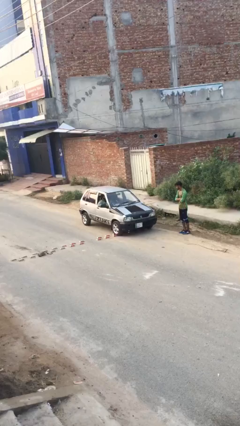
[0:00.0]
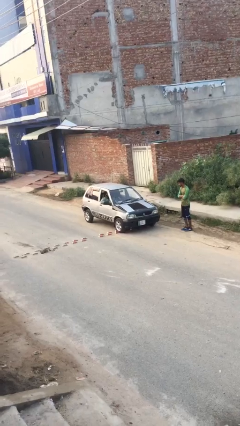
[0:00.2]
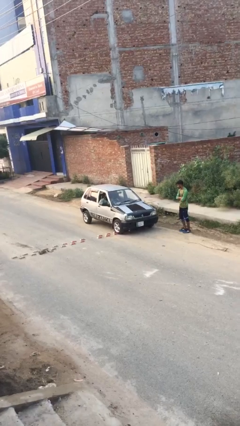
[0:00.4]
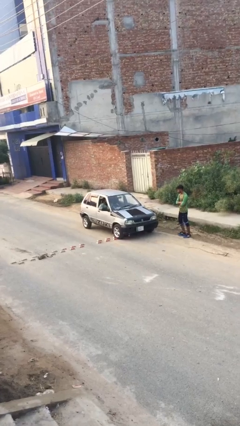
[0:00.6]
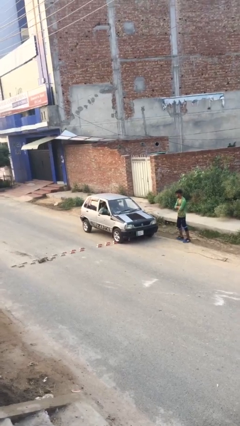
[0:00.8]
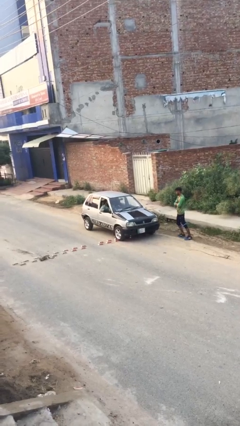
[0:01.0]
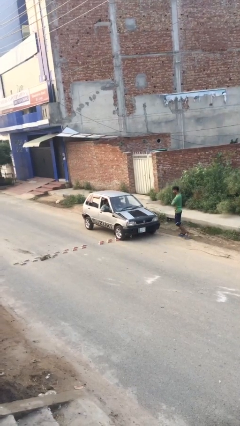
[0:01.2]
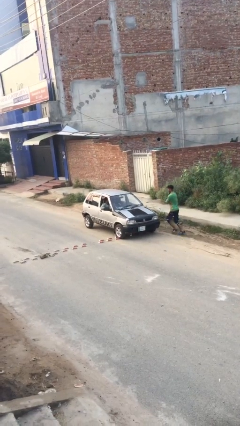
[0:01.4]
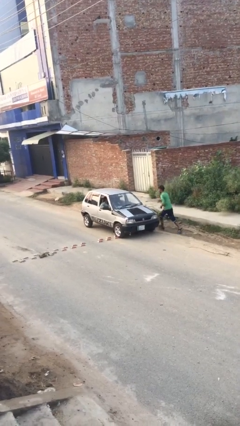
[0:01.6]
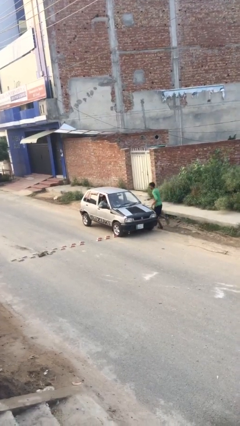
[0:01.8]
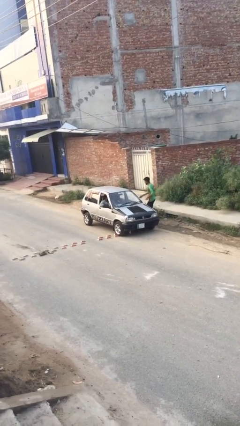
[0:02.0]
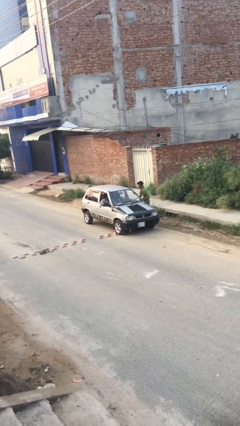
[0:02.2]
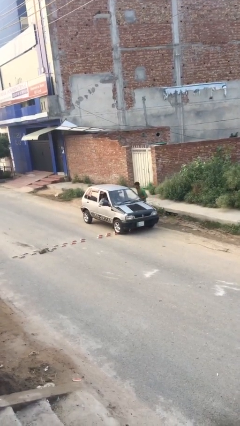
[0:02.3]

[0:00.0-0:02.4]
car picks up person

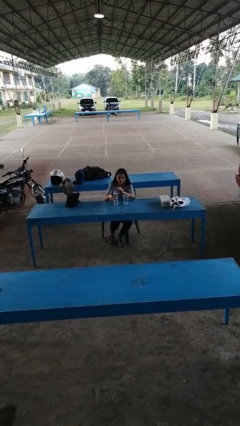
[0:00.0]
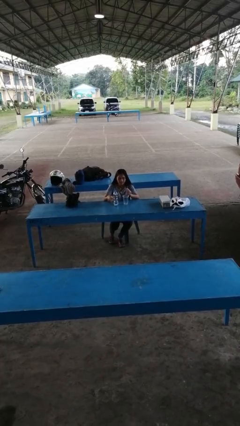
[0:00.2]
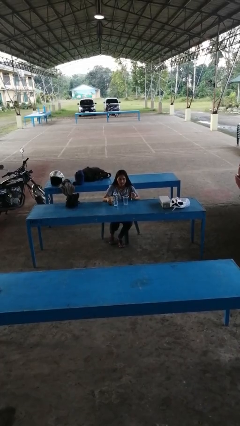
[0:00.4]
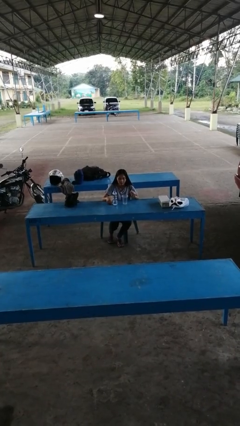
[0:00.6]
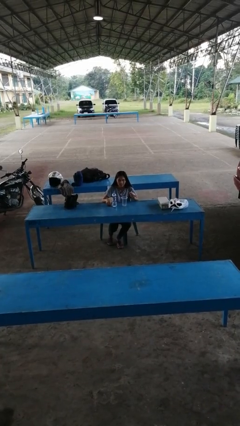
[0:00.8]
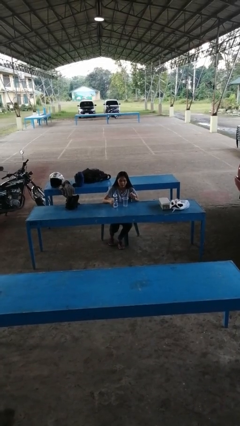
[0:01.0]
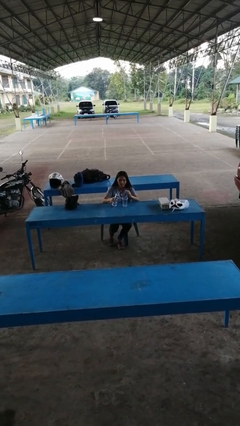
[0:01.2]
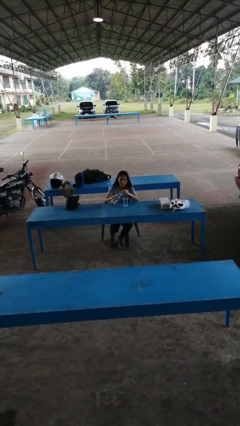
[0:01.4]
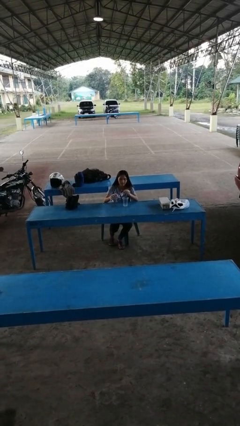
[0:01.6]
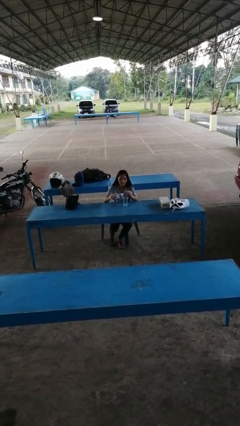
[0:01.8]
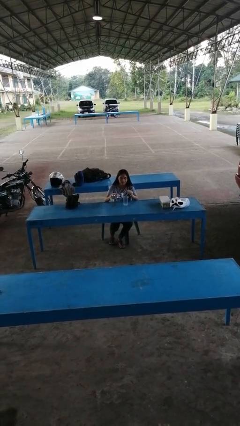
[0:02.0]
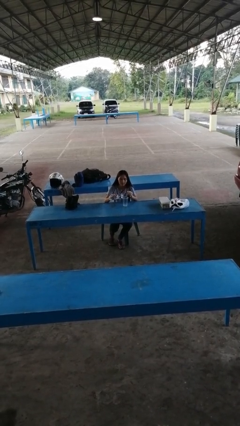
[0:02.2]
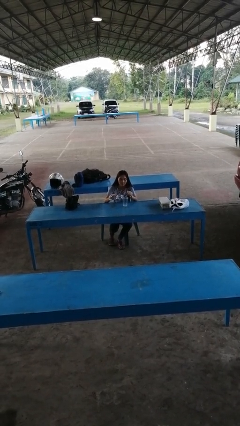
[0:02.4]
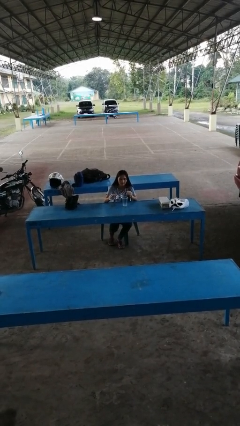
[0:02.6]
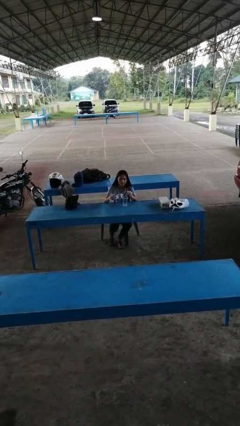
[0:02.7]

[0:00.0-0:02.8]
person pours liquid into cup

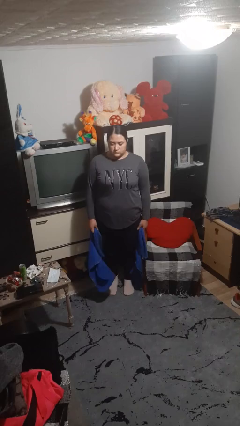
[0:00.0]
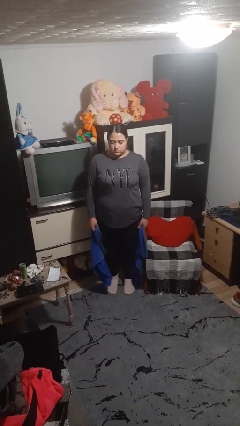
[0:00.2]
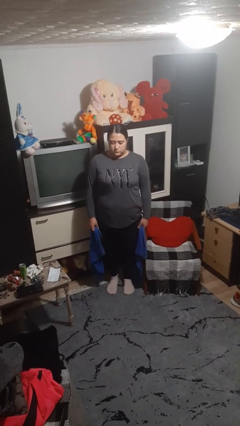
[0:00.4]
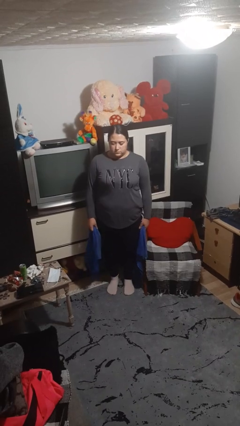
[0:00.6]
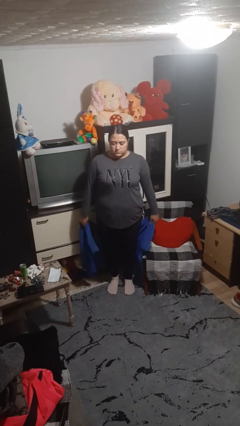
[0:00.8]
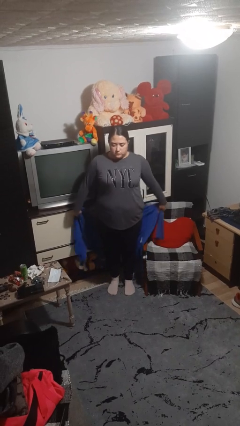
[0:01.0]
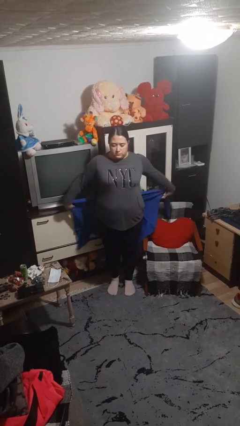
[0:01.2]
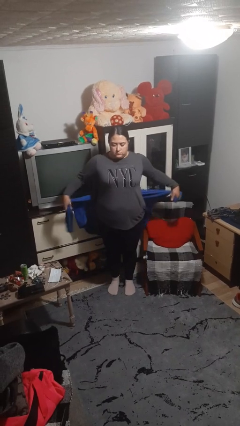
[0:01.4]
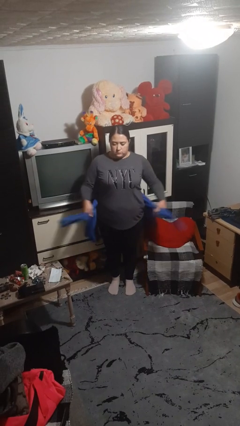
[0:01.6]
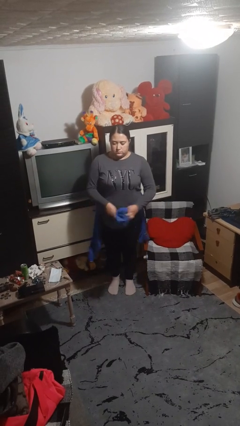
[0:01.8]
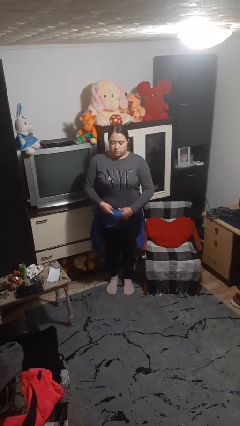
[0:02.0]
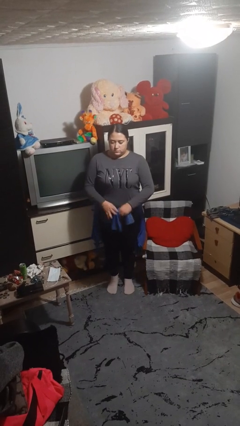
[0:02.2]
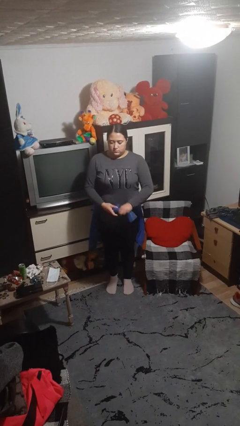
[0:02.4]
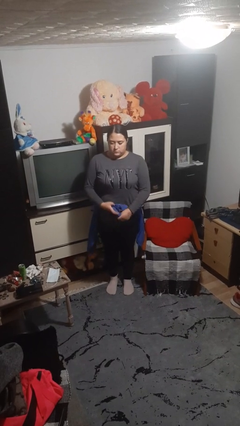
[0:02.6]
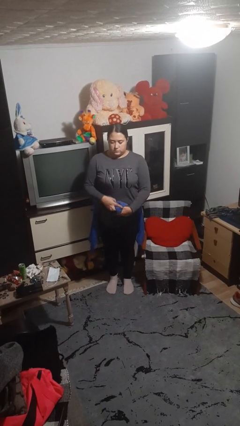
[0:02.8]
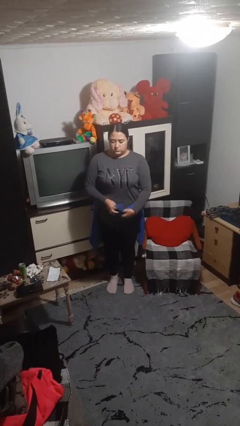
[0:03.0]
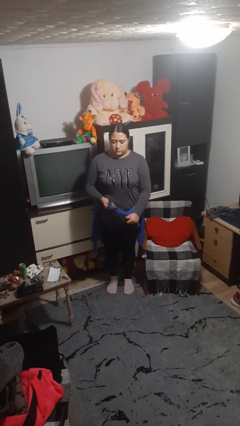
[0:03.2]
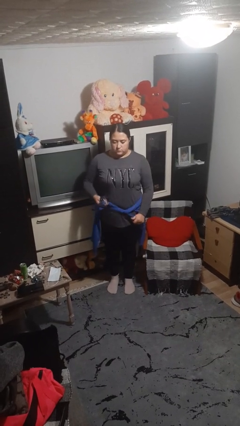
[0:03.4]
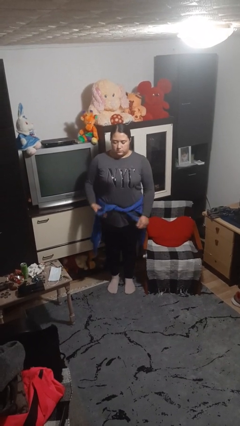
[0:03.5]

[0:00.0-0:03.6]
person ties jacket around waist

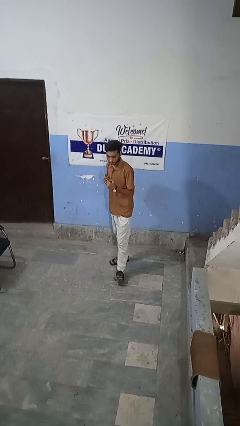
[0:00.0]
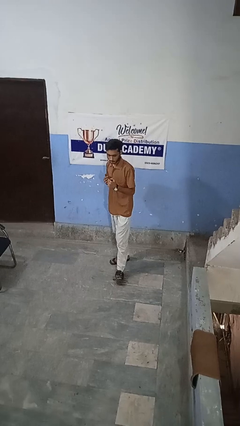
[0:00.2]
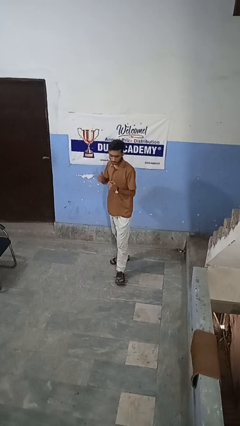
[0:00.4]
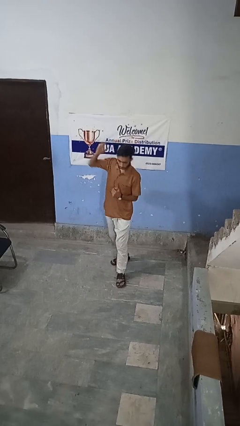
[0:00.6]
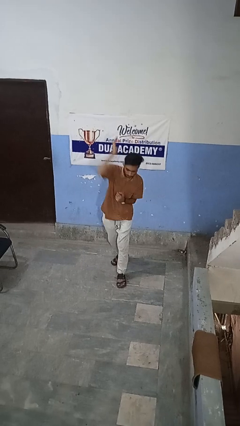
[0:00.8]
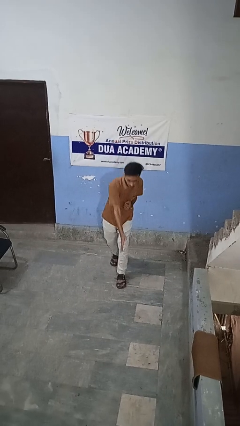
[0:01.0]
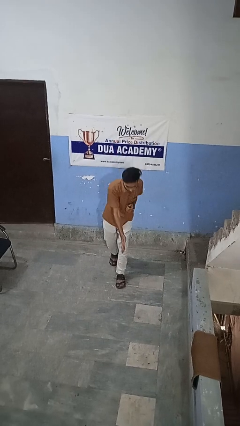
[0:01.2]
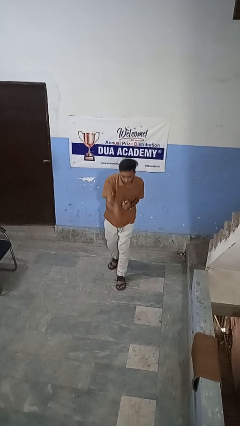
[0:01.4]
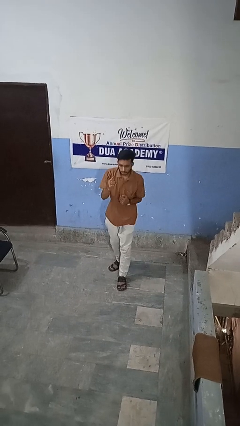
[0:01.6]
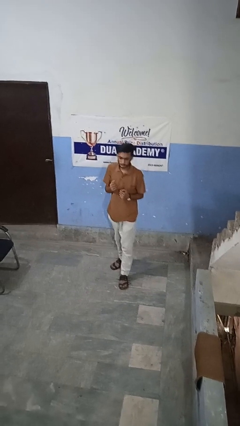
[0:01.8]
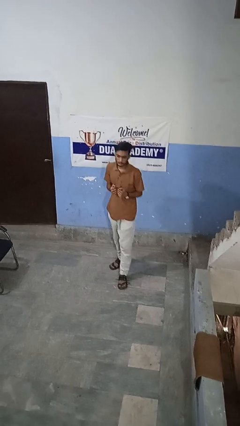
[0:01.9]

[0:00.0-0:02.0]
person karate chop

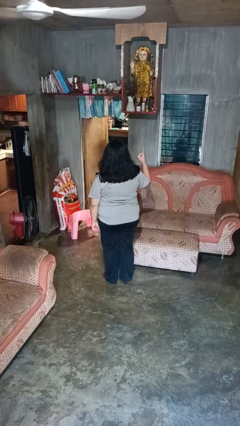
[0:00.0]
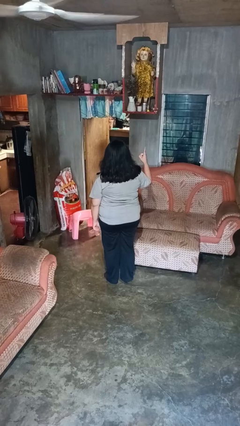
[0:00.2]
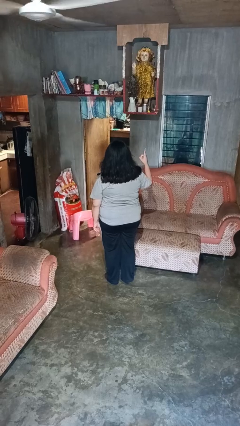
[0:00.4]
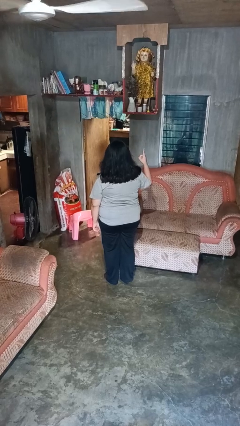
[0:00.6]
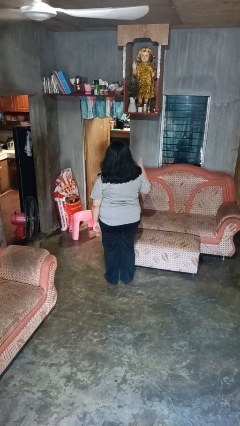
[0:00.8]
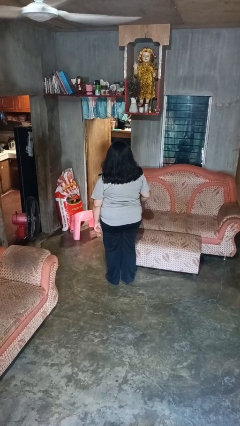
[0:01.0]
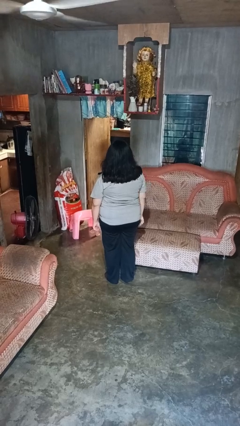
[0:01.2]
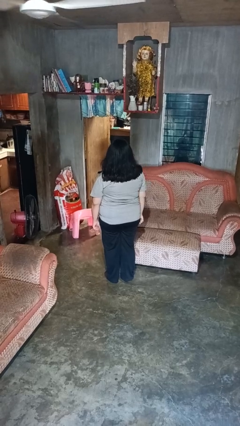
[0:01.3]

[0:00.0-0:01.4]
person gestures number one

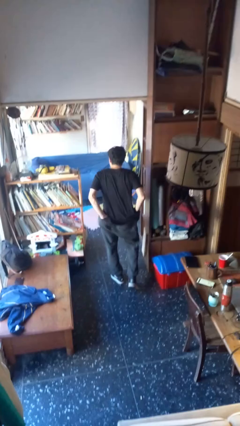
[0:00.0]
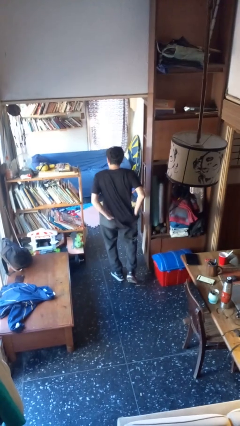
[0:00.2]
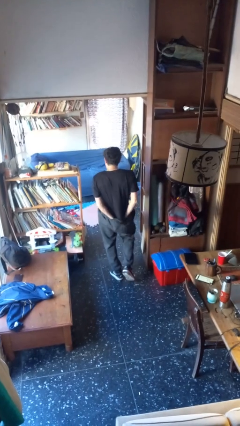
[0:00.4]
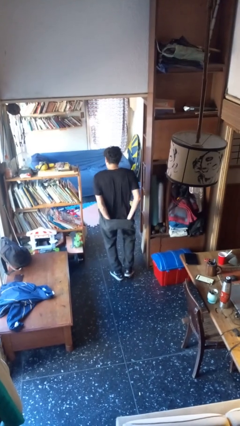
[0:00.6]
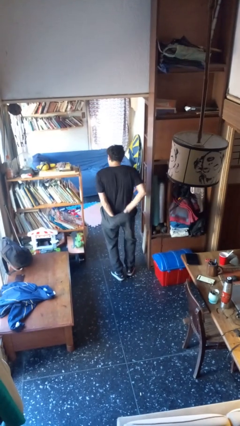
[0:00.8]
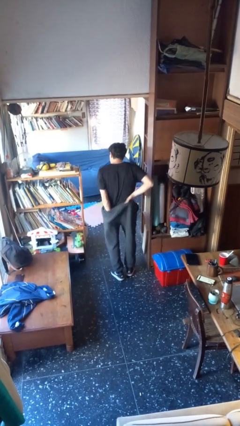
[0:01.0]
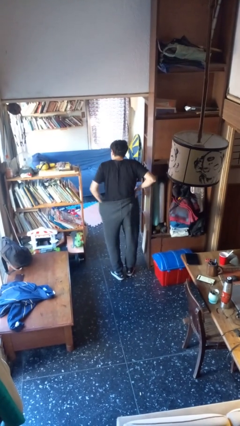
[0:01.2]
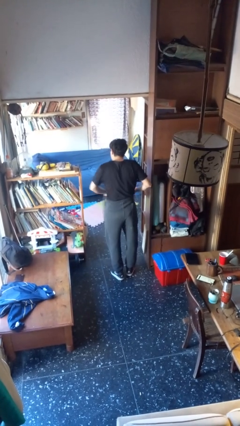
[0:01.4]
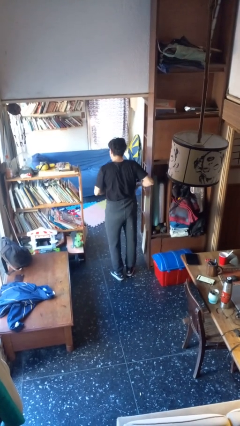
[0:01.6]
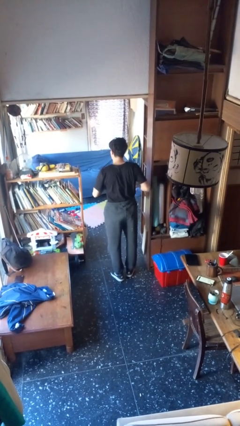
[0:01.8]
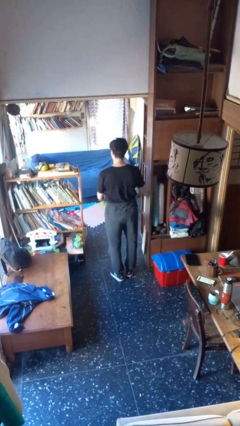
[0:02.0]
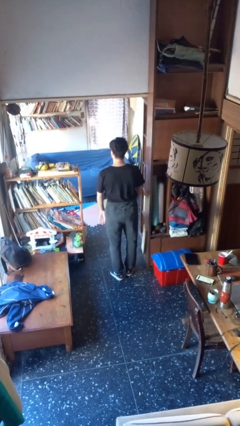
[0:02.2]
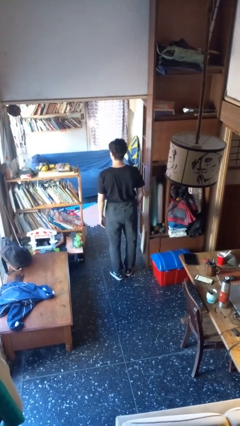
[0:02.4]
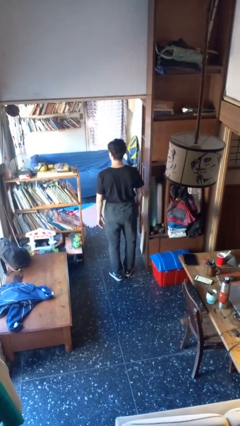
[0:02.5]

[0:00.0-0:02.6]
person tucks in shirt

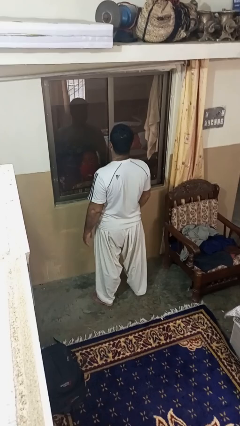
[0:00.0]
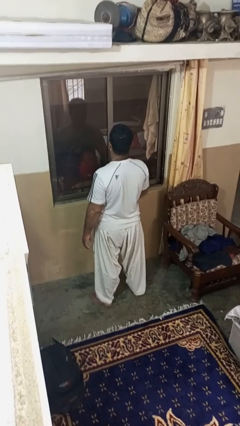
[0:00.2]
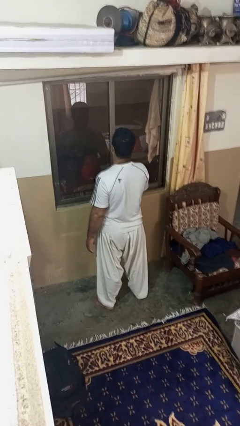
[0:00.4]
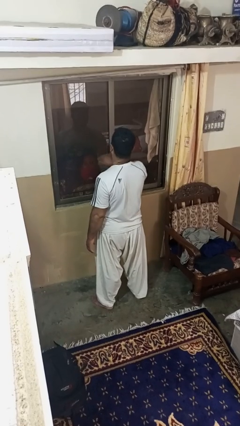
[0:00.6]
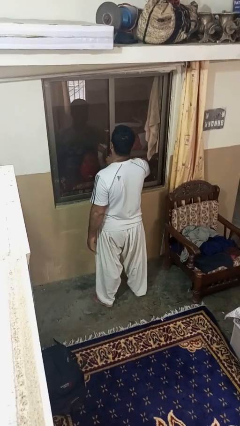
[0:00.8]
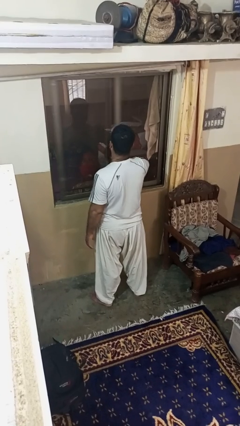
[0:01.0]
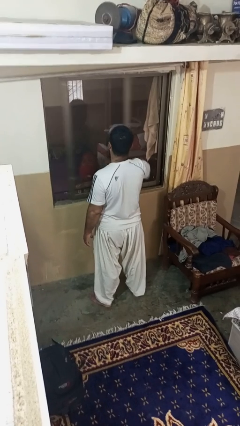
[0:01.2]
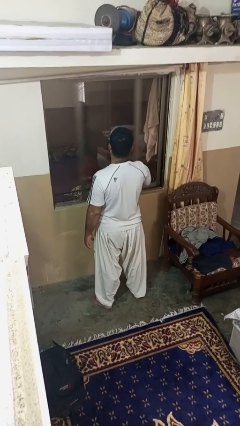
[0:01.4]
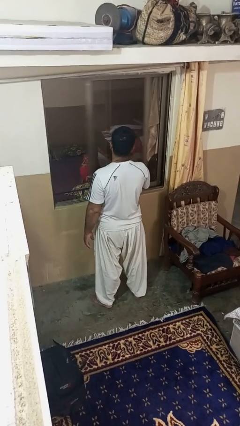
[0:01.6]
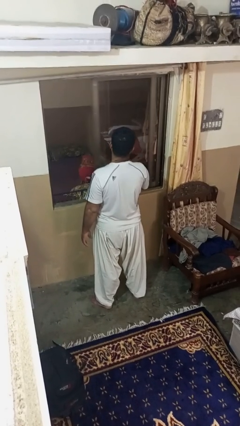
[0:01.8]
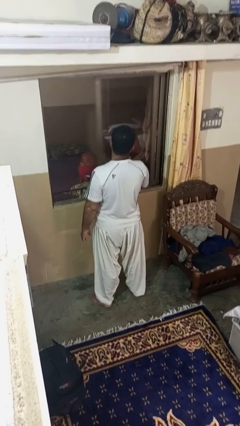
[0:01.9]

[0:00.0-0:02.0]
person opens home window
